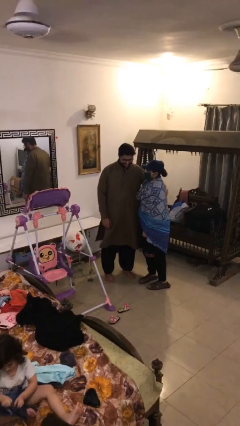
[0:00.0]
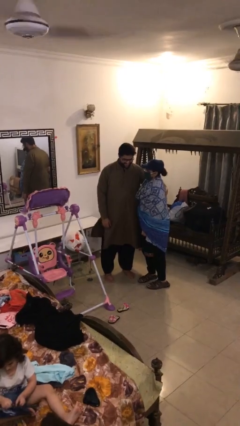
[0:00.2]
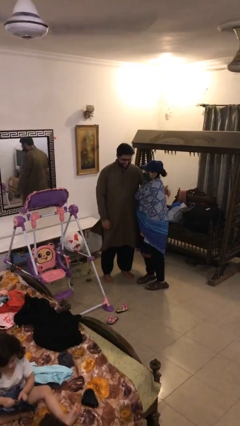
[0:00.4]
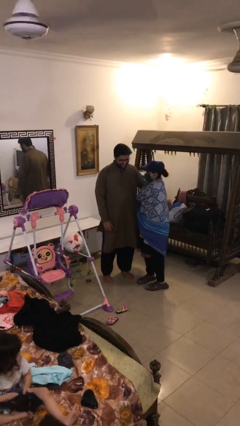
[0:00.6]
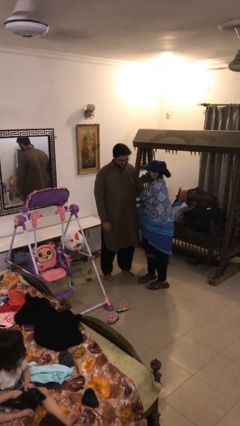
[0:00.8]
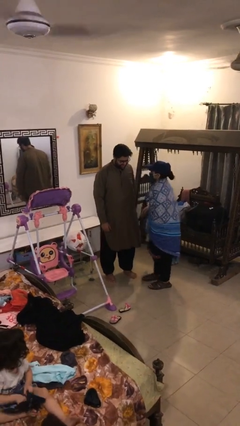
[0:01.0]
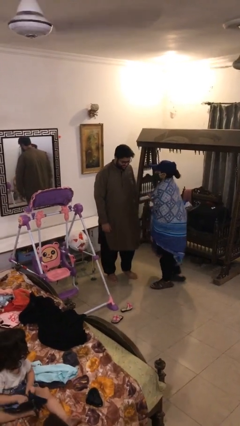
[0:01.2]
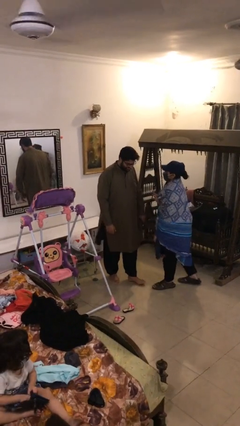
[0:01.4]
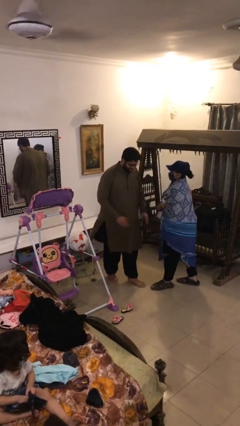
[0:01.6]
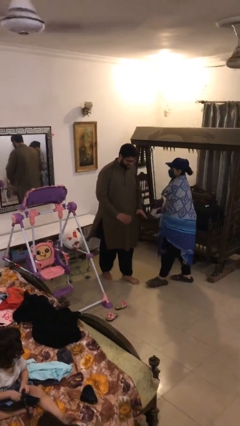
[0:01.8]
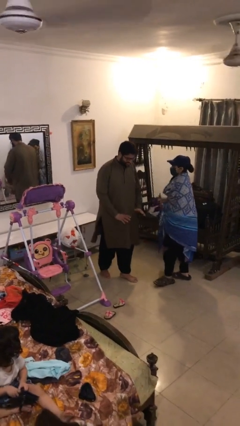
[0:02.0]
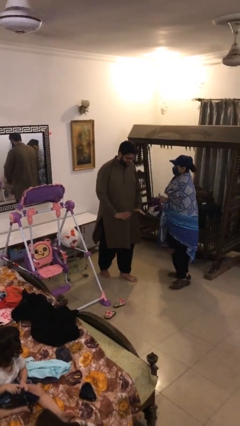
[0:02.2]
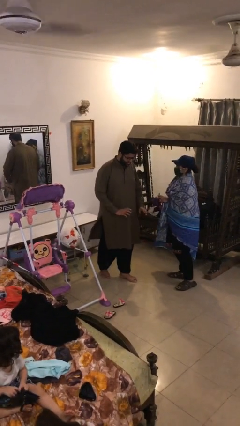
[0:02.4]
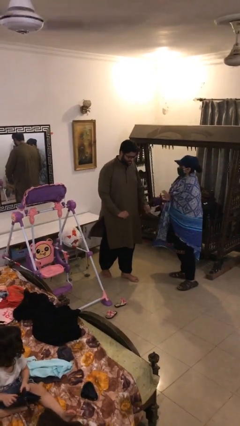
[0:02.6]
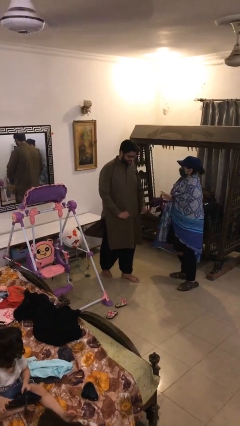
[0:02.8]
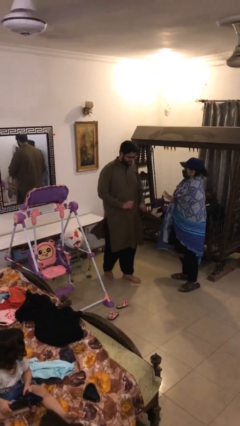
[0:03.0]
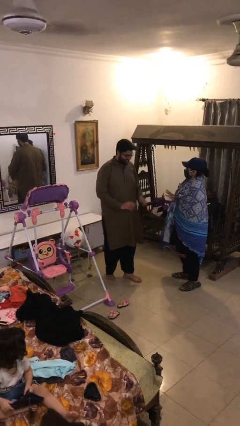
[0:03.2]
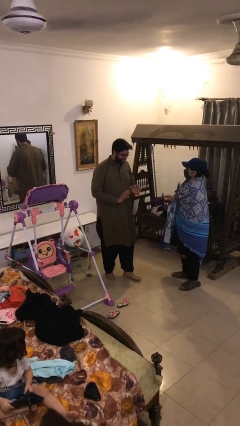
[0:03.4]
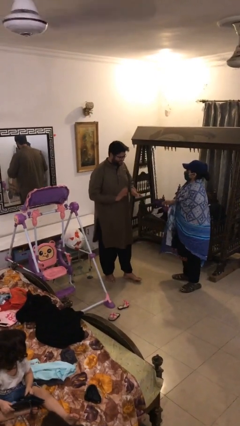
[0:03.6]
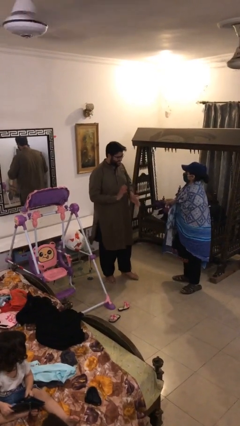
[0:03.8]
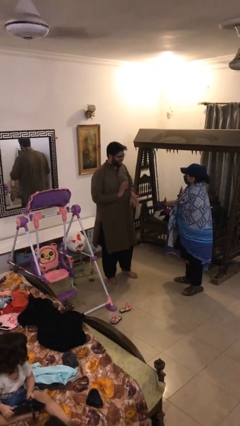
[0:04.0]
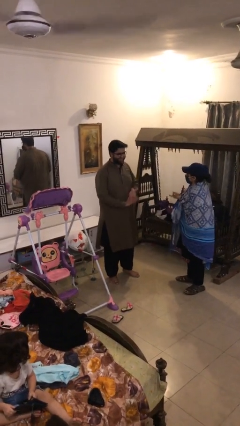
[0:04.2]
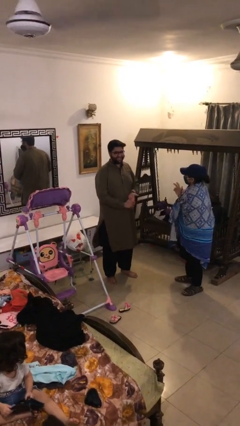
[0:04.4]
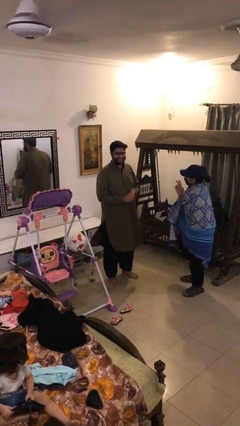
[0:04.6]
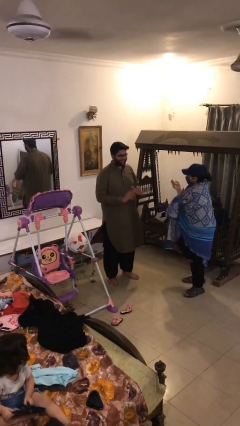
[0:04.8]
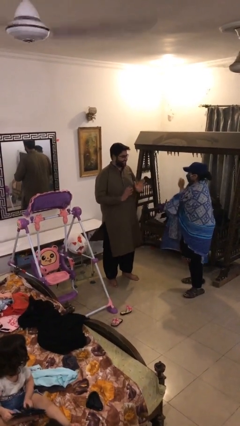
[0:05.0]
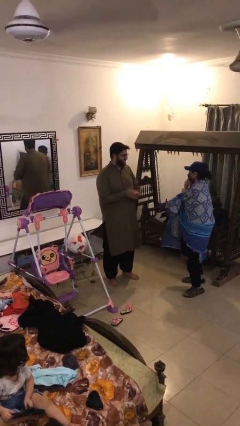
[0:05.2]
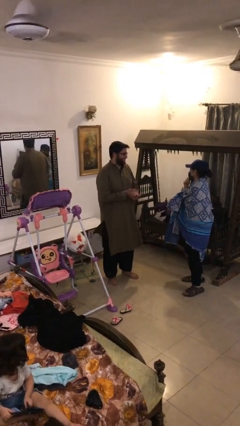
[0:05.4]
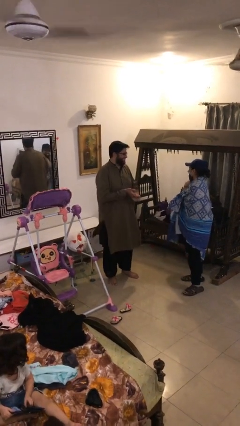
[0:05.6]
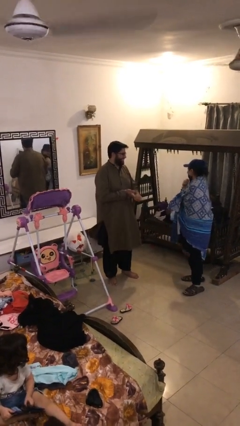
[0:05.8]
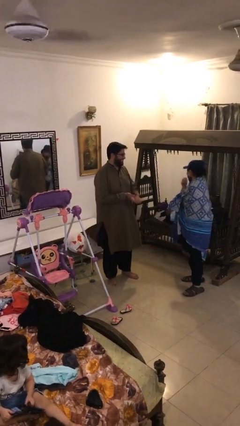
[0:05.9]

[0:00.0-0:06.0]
person talks to person

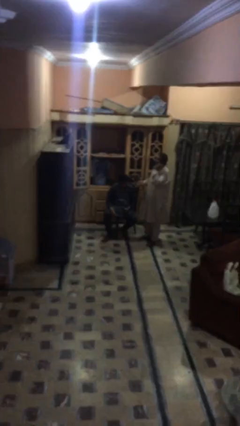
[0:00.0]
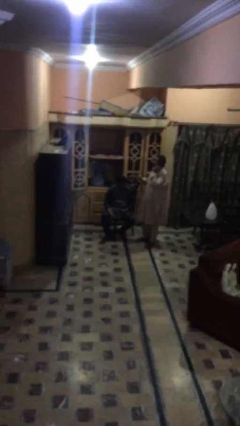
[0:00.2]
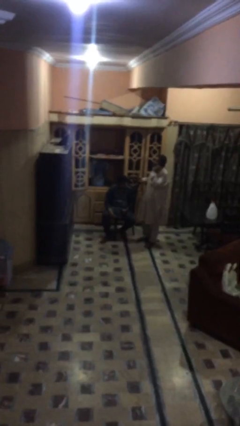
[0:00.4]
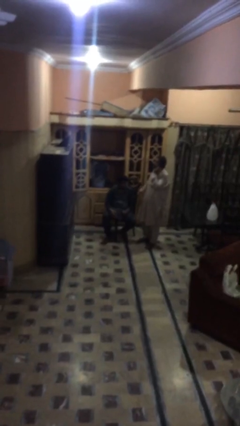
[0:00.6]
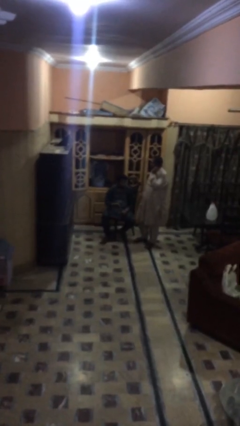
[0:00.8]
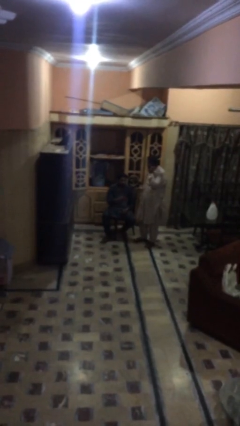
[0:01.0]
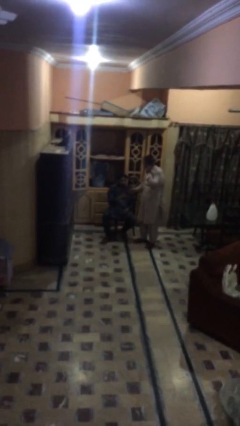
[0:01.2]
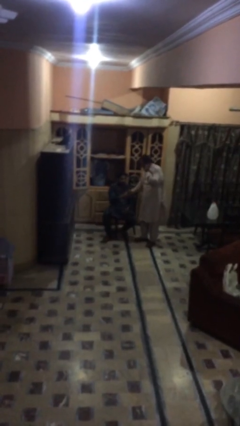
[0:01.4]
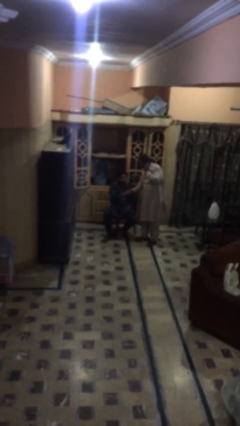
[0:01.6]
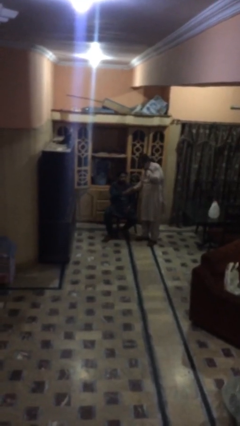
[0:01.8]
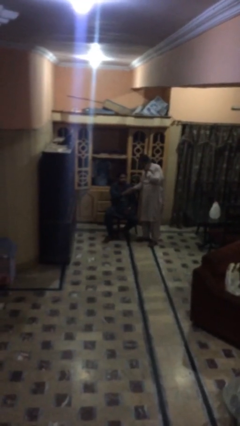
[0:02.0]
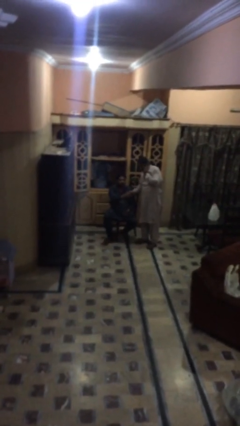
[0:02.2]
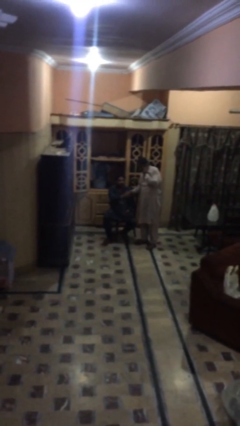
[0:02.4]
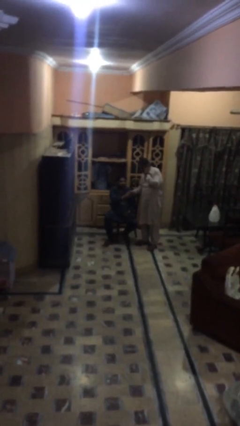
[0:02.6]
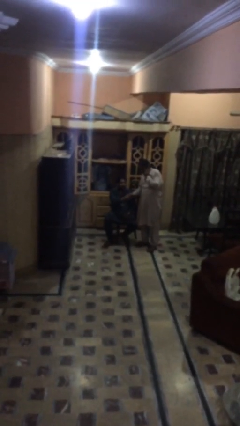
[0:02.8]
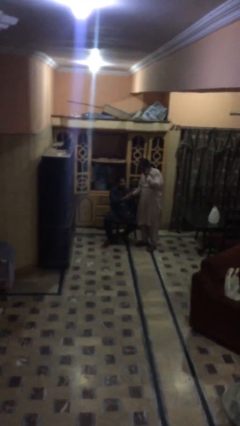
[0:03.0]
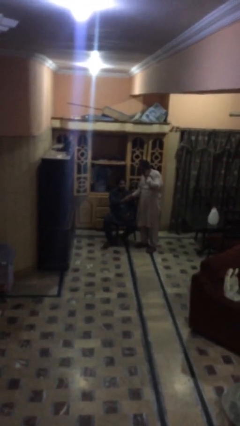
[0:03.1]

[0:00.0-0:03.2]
person shakes hand

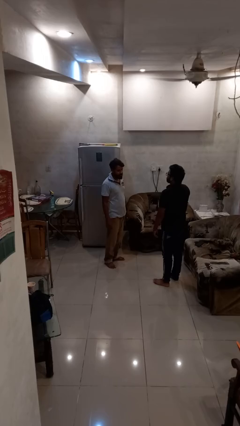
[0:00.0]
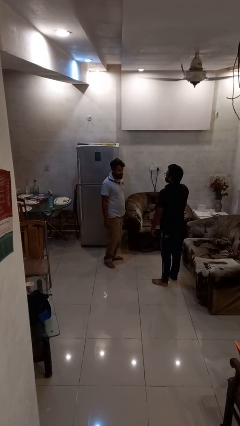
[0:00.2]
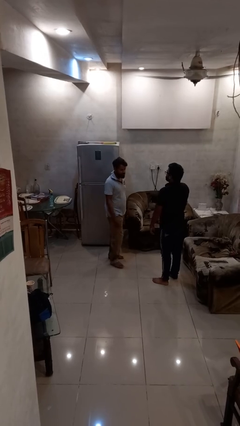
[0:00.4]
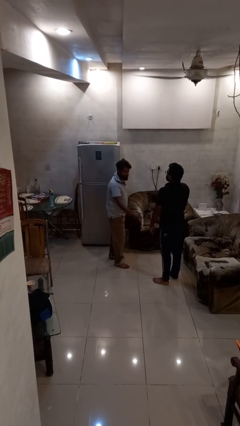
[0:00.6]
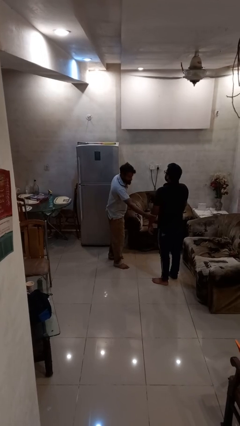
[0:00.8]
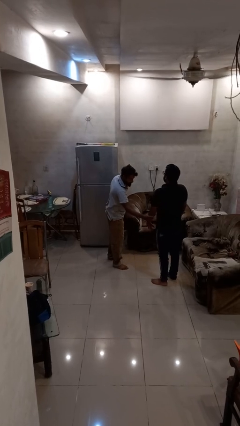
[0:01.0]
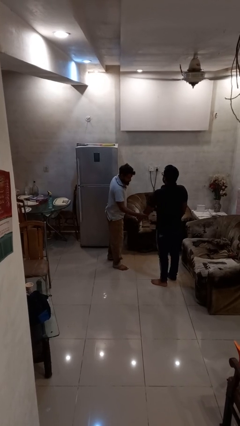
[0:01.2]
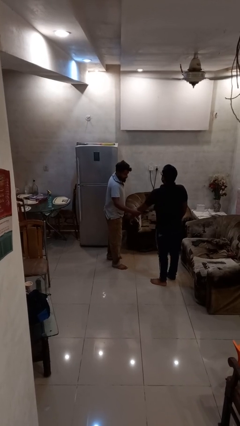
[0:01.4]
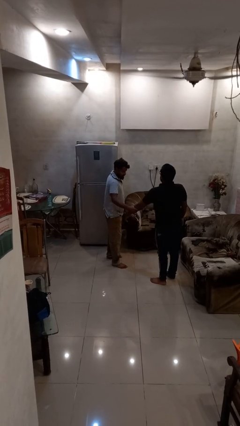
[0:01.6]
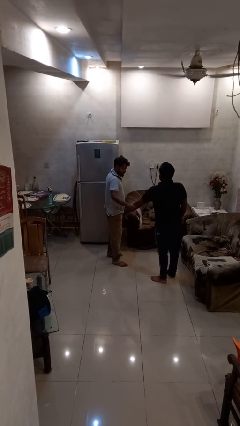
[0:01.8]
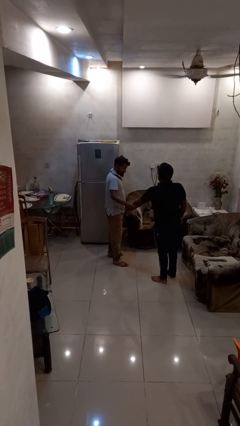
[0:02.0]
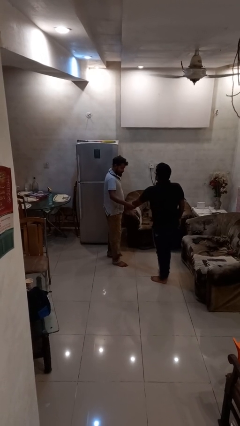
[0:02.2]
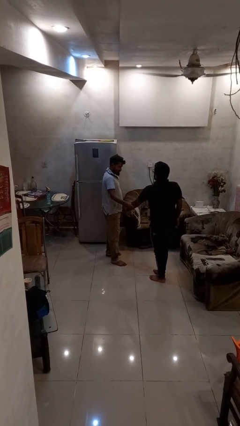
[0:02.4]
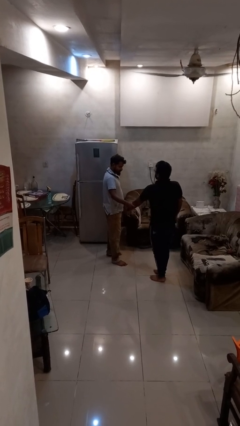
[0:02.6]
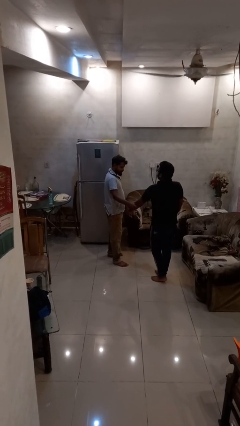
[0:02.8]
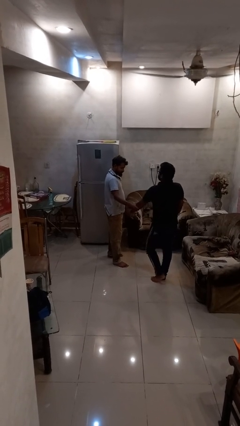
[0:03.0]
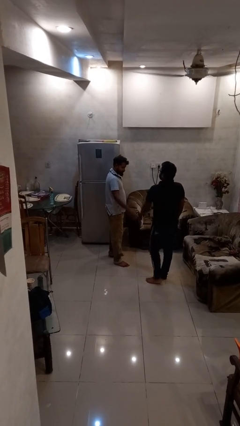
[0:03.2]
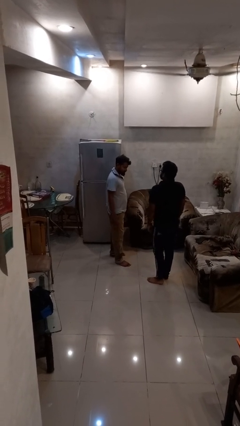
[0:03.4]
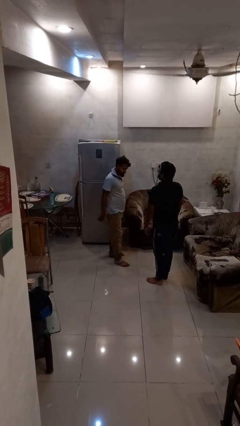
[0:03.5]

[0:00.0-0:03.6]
person grabs person by forearm

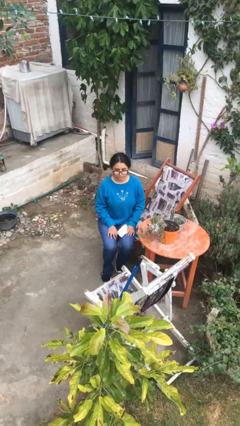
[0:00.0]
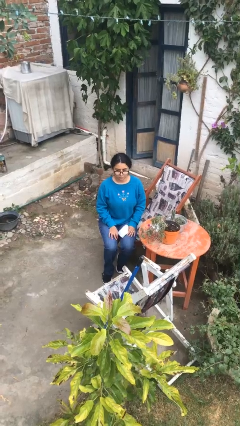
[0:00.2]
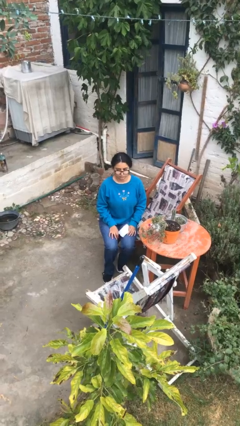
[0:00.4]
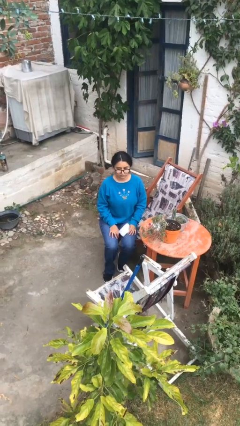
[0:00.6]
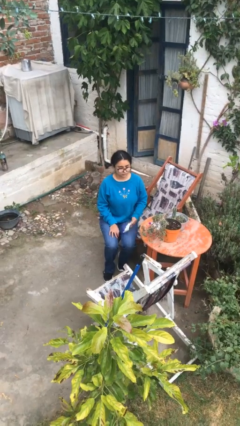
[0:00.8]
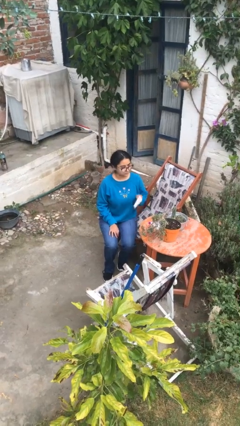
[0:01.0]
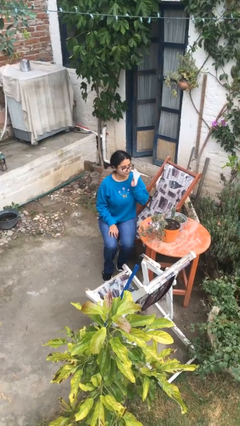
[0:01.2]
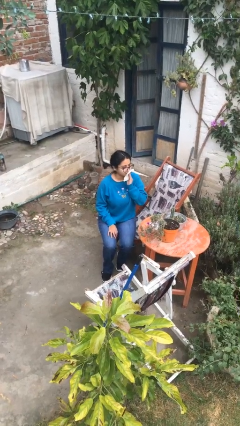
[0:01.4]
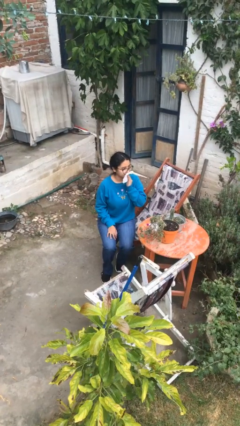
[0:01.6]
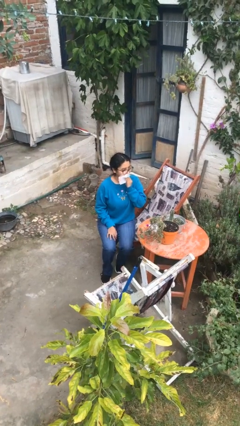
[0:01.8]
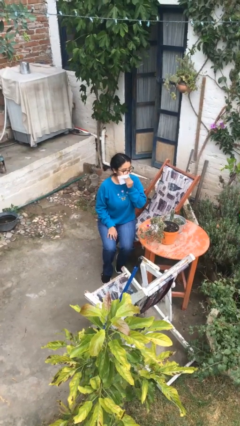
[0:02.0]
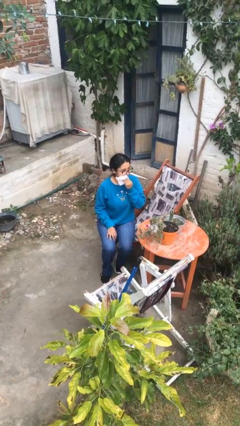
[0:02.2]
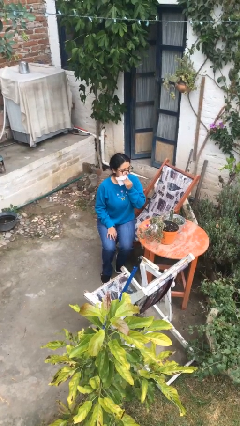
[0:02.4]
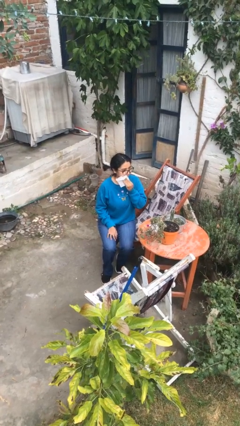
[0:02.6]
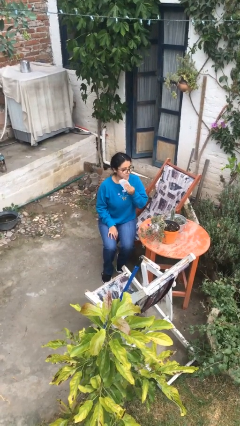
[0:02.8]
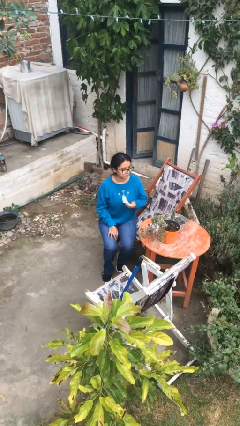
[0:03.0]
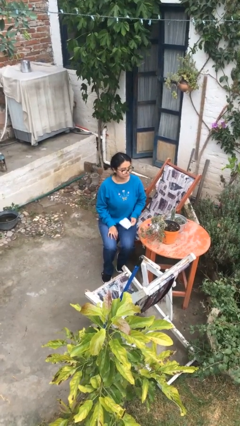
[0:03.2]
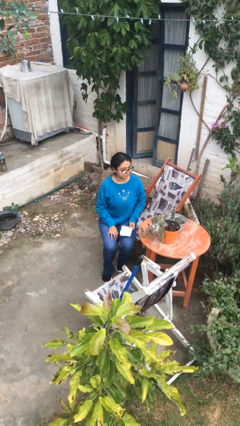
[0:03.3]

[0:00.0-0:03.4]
person wipes mouth with napkin

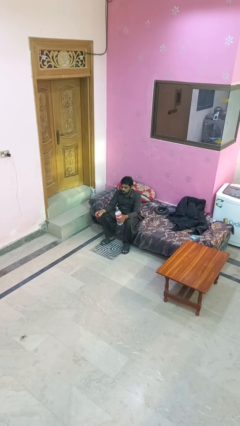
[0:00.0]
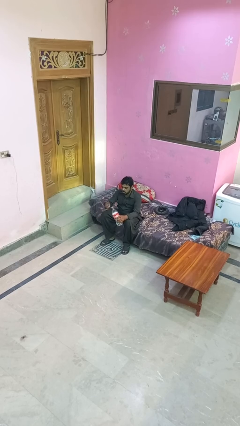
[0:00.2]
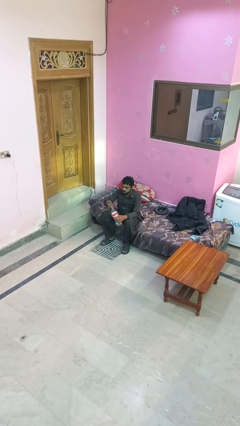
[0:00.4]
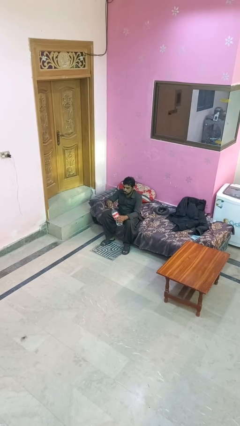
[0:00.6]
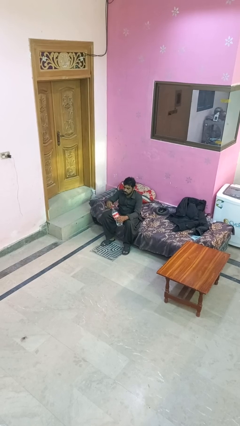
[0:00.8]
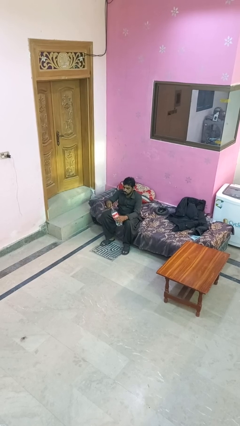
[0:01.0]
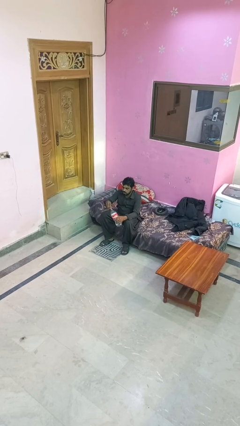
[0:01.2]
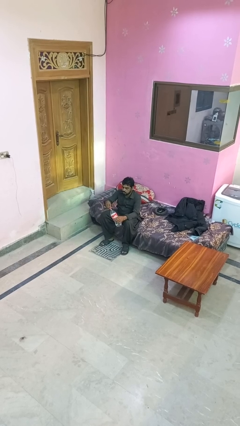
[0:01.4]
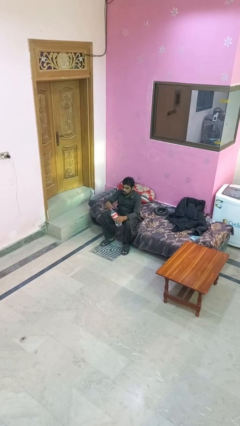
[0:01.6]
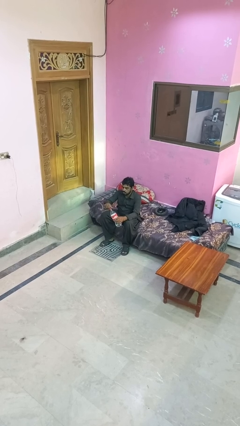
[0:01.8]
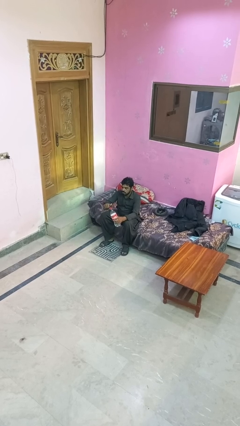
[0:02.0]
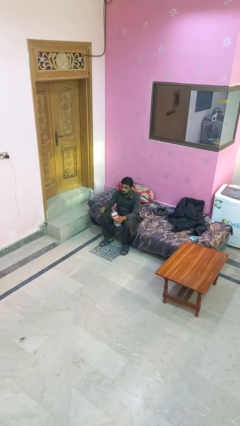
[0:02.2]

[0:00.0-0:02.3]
person screws lid to bottle
